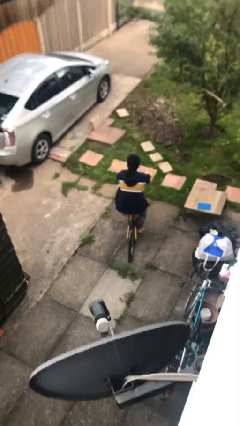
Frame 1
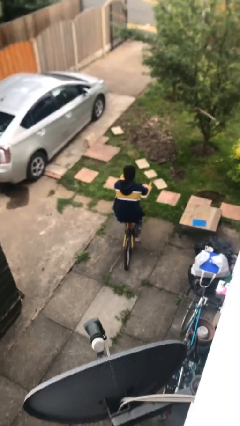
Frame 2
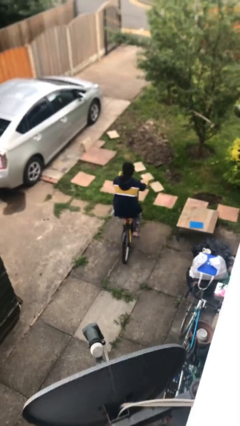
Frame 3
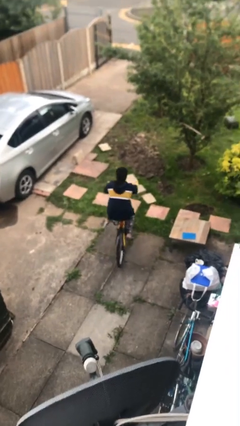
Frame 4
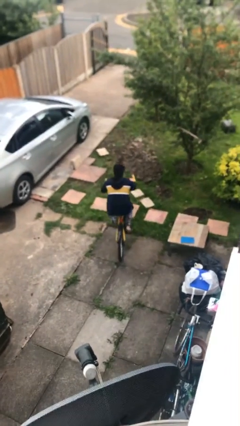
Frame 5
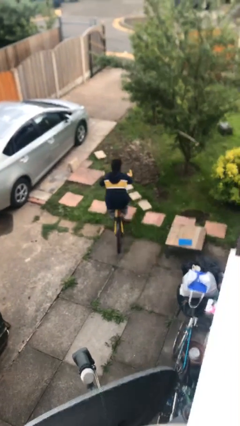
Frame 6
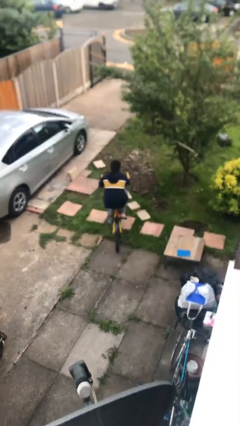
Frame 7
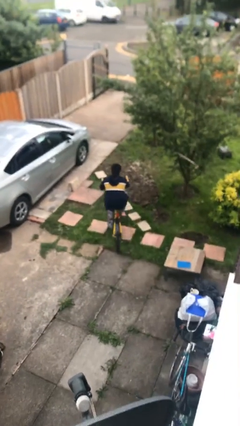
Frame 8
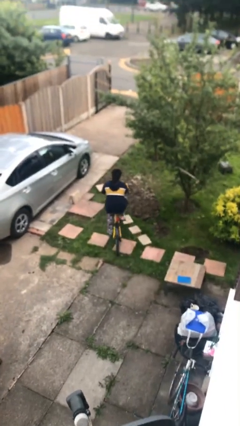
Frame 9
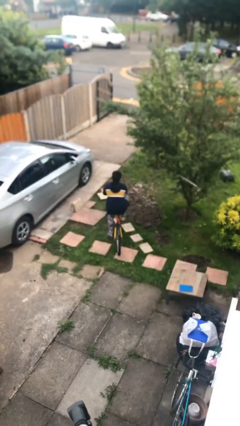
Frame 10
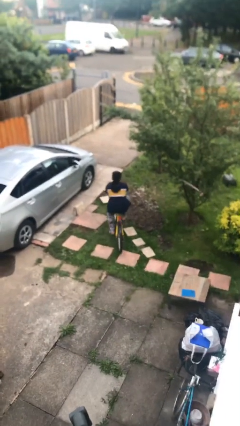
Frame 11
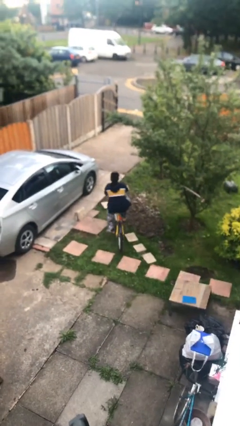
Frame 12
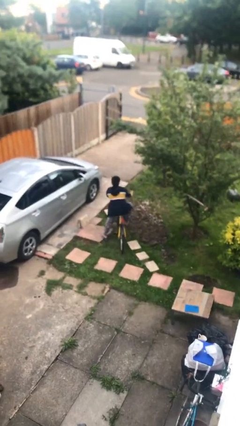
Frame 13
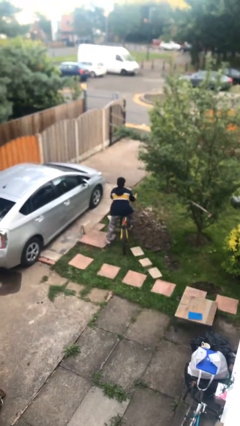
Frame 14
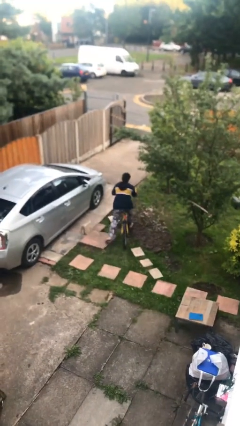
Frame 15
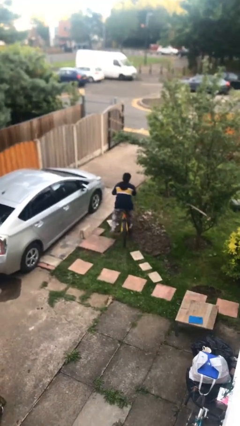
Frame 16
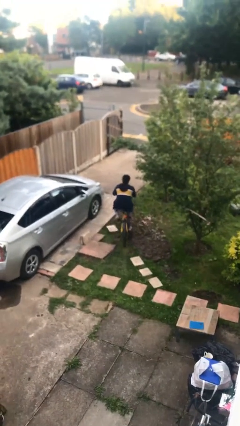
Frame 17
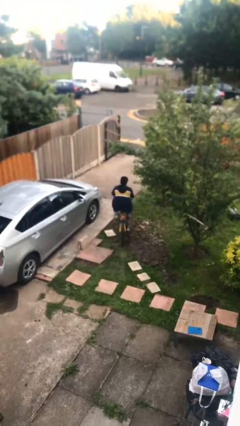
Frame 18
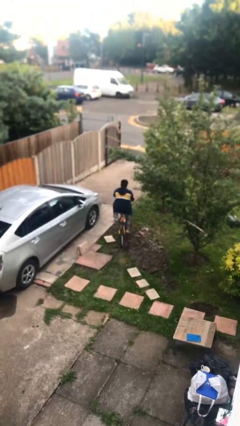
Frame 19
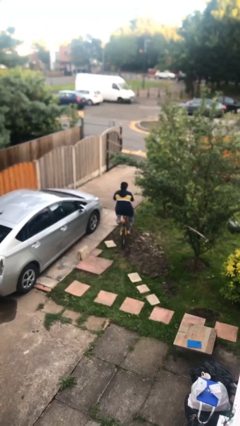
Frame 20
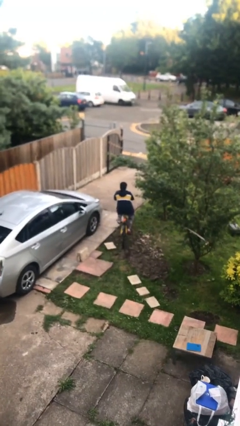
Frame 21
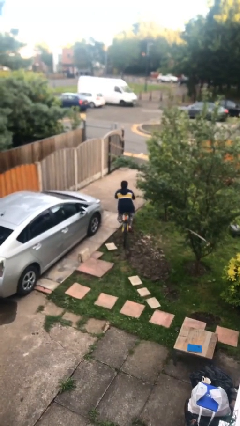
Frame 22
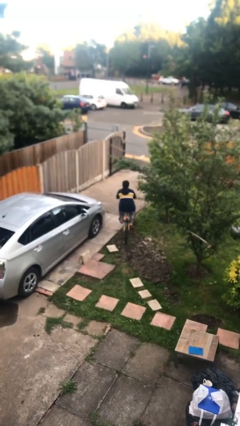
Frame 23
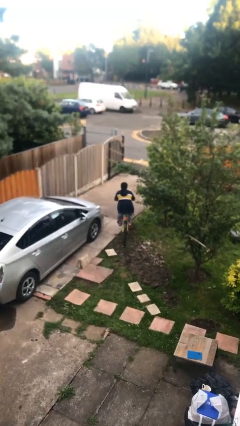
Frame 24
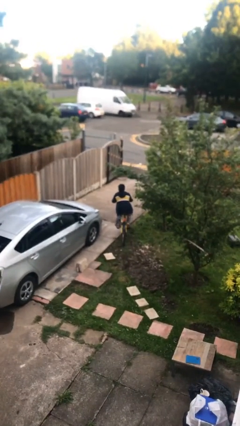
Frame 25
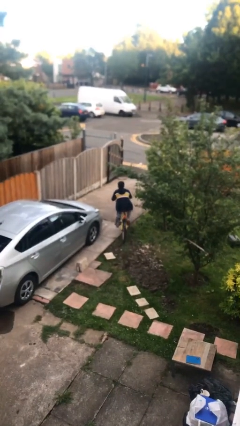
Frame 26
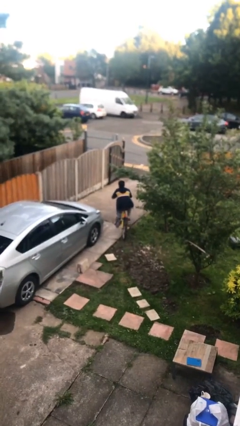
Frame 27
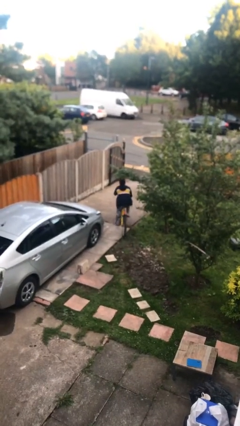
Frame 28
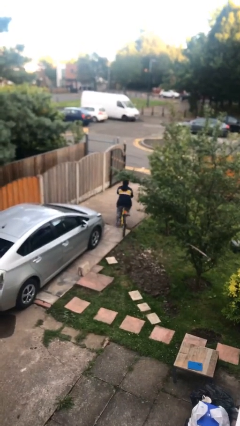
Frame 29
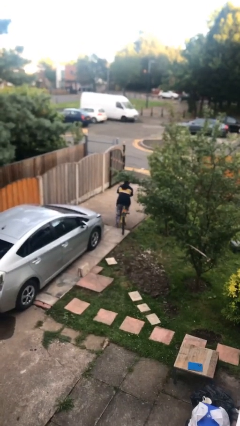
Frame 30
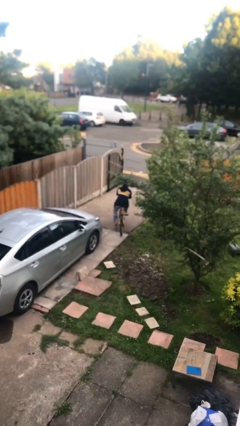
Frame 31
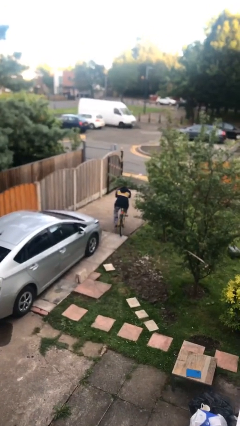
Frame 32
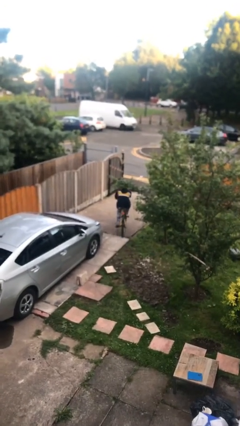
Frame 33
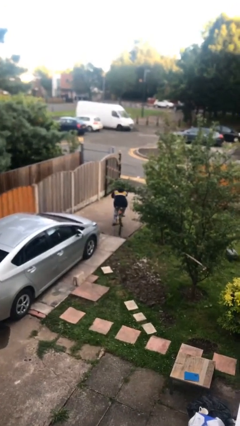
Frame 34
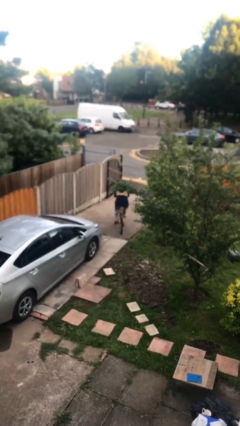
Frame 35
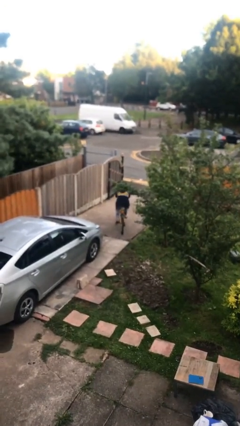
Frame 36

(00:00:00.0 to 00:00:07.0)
person rides bicycle

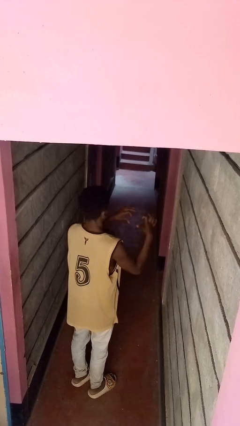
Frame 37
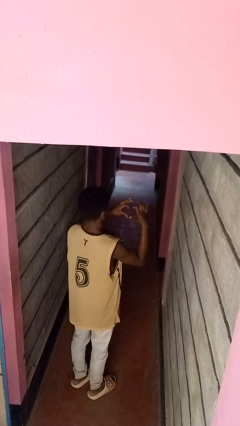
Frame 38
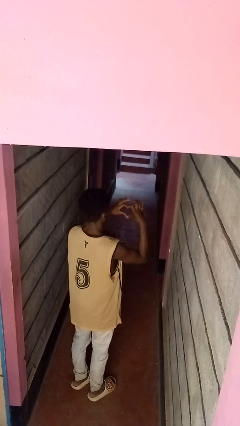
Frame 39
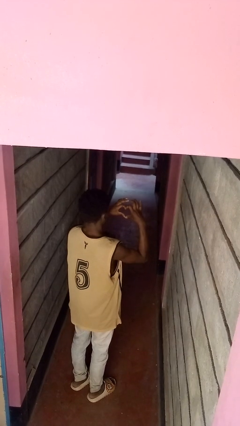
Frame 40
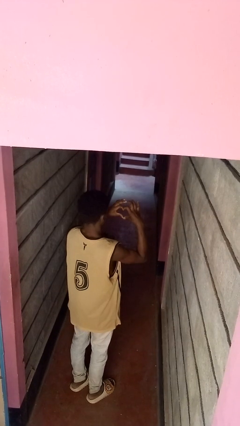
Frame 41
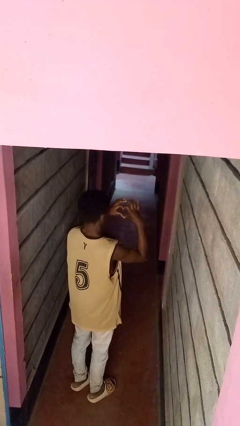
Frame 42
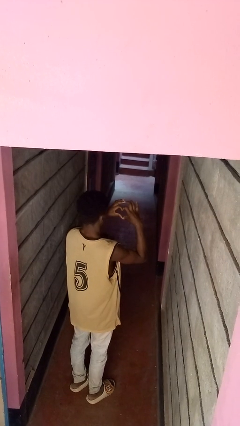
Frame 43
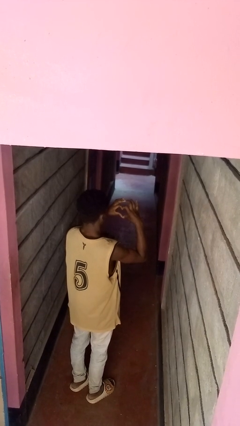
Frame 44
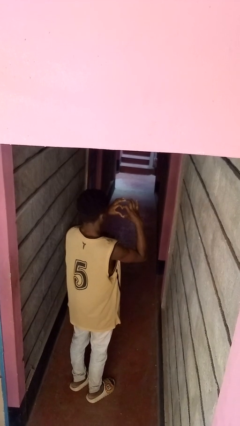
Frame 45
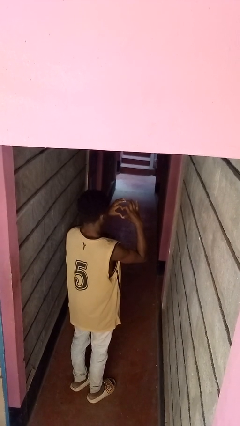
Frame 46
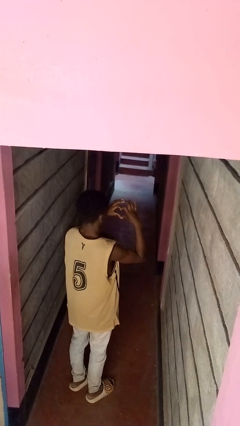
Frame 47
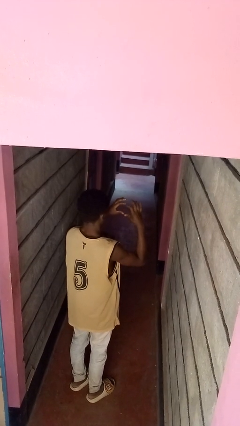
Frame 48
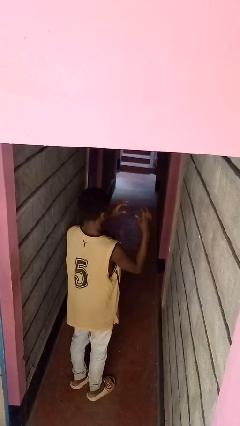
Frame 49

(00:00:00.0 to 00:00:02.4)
person gestures heart

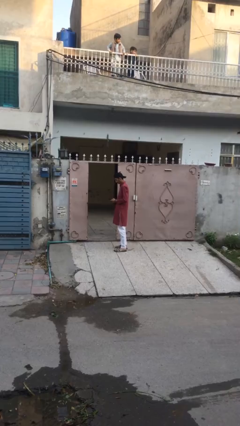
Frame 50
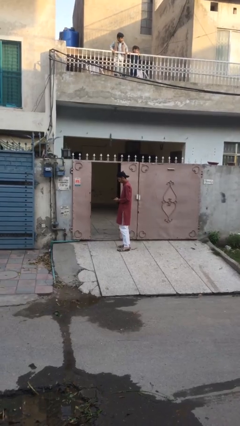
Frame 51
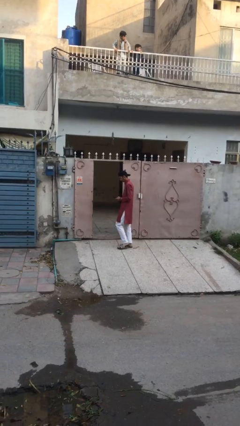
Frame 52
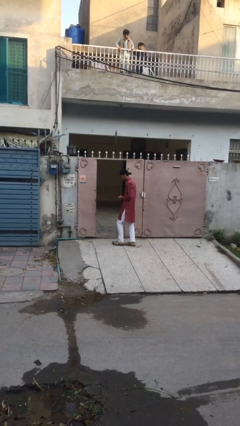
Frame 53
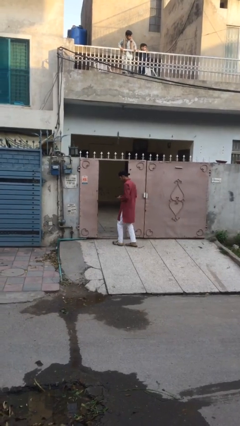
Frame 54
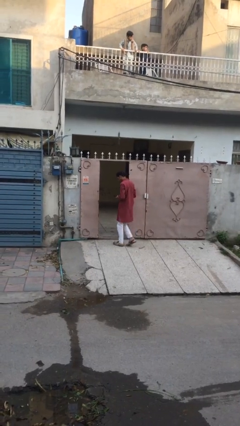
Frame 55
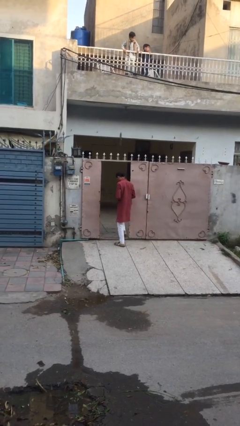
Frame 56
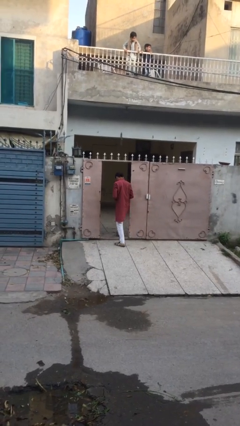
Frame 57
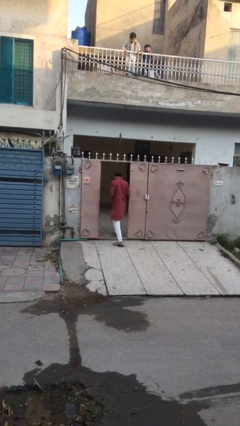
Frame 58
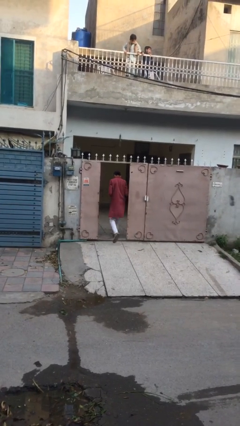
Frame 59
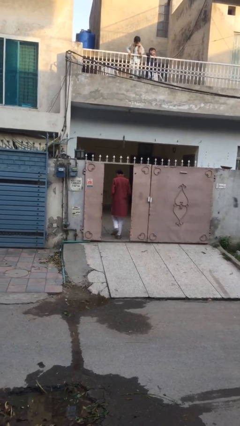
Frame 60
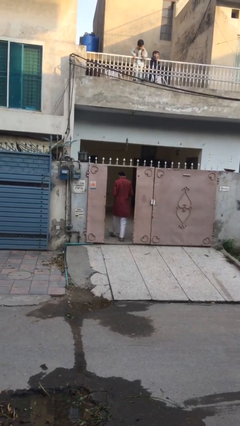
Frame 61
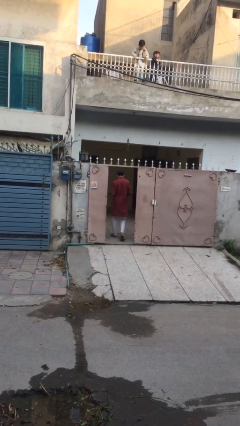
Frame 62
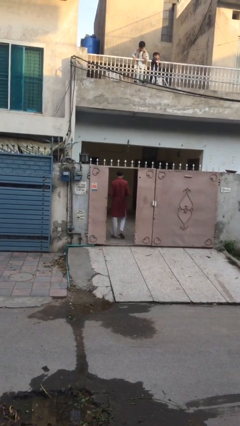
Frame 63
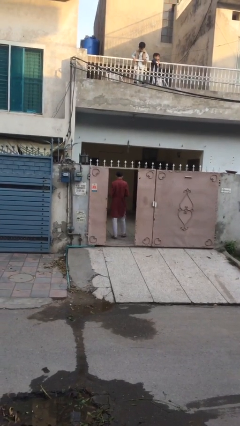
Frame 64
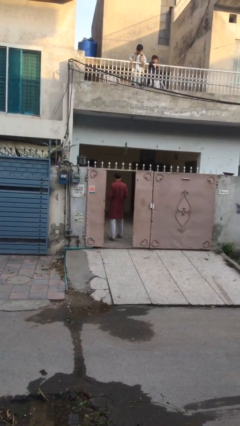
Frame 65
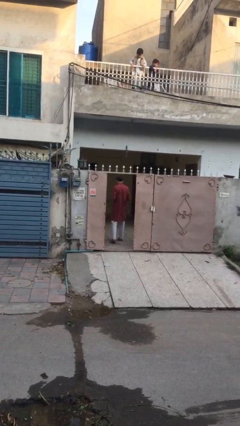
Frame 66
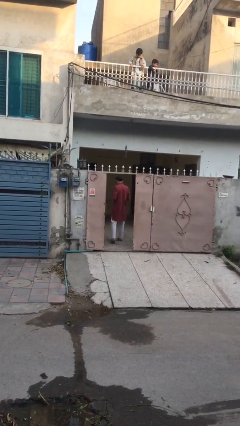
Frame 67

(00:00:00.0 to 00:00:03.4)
person enters scene through structure

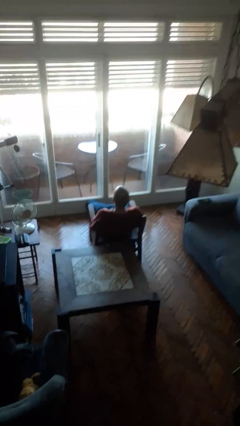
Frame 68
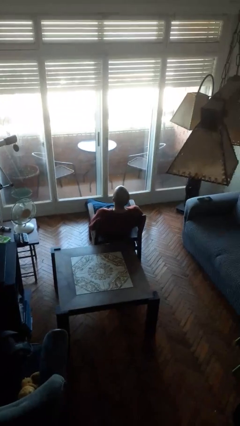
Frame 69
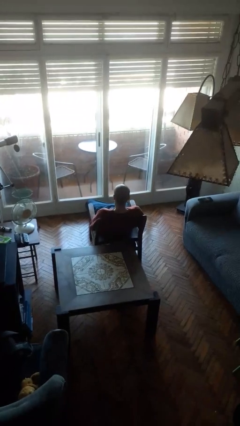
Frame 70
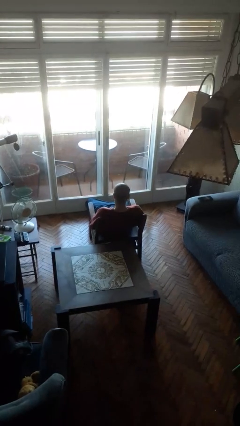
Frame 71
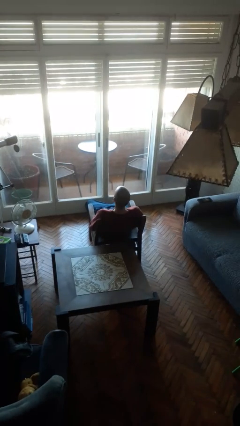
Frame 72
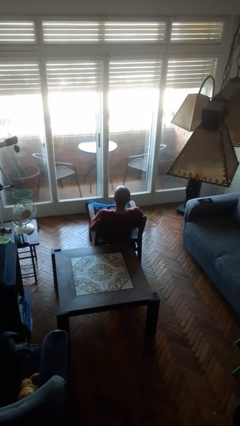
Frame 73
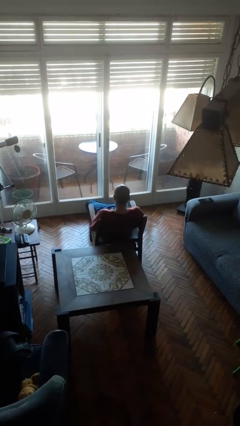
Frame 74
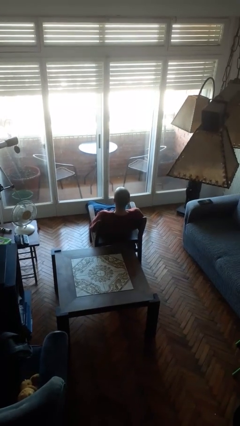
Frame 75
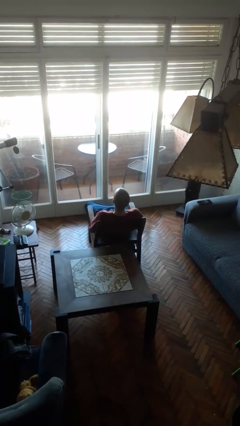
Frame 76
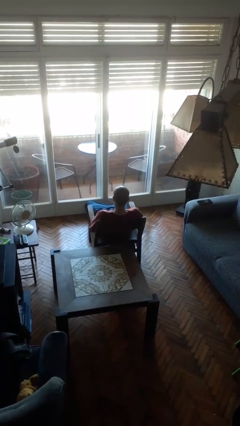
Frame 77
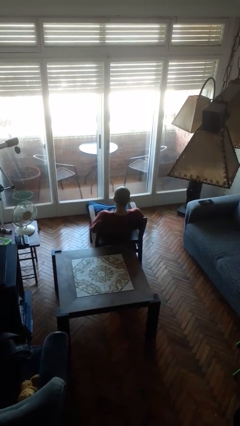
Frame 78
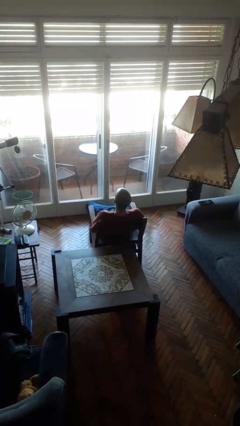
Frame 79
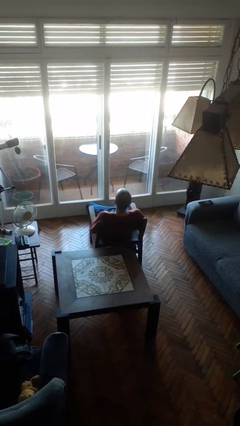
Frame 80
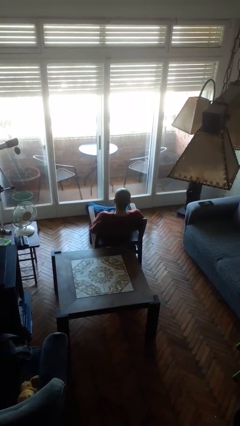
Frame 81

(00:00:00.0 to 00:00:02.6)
person nods head

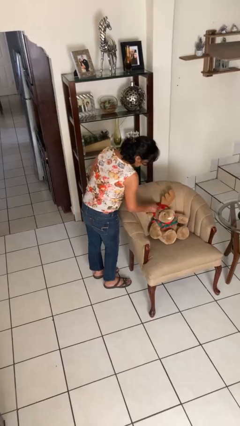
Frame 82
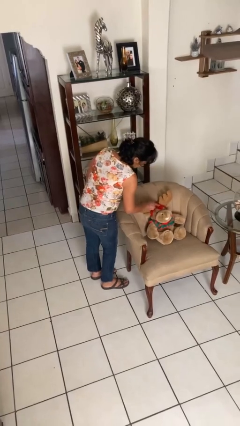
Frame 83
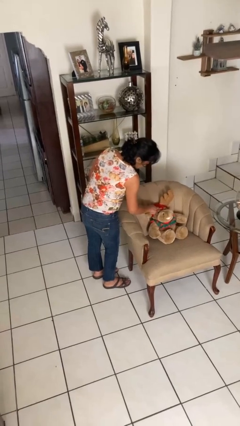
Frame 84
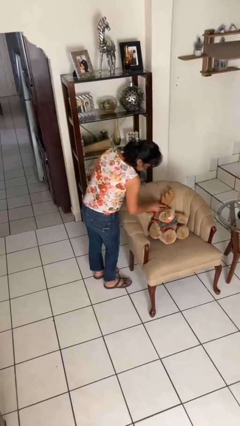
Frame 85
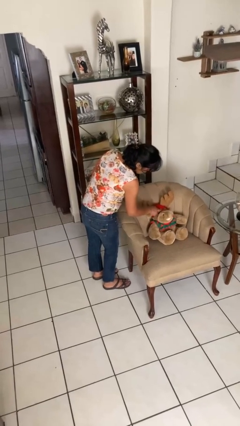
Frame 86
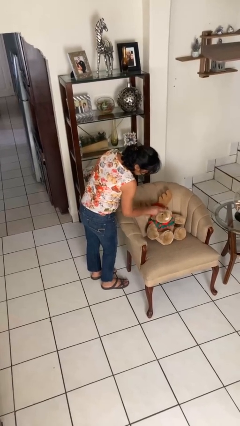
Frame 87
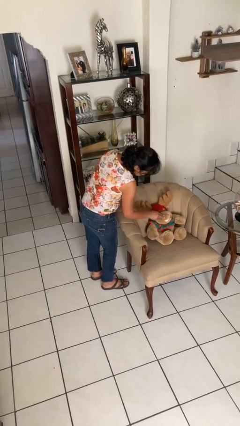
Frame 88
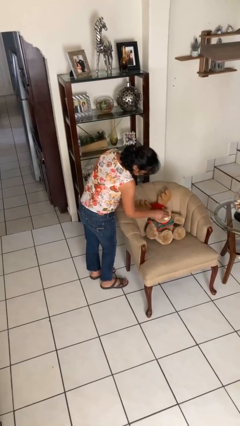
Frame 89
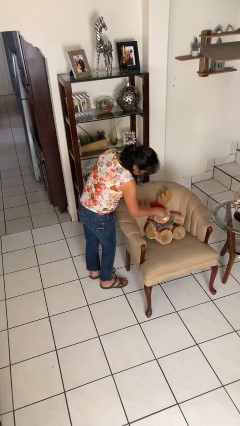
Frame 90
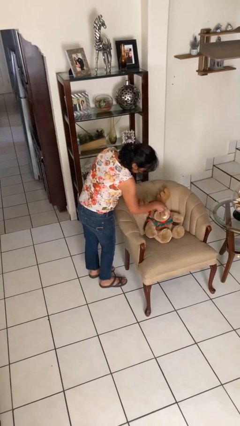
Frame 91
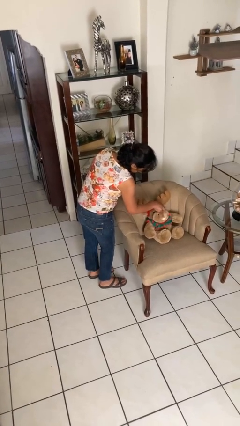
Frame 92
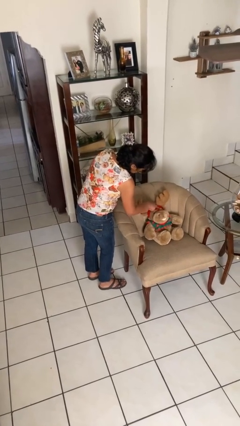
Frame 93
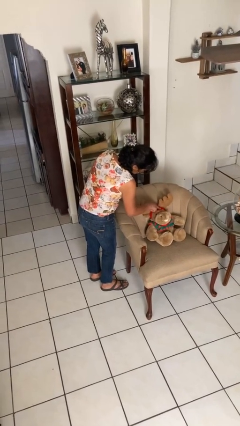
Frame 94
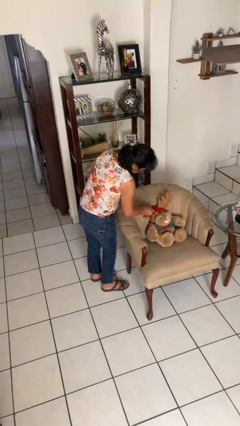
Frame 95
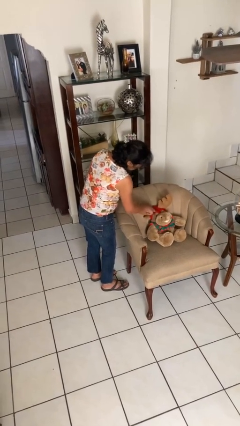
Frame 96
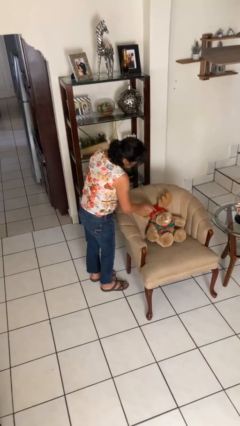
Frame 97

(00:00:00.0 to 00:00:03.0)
person taps object with finger
